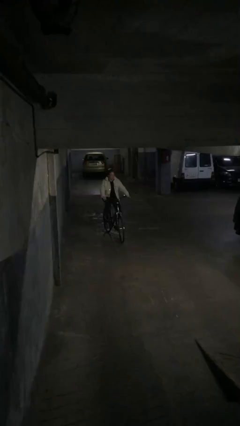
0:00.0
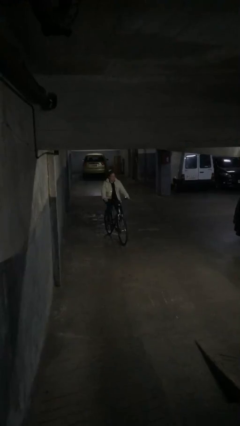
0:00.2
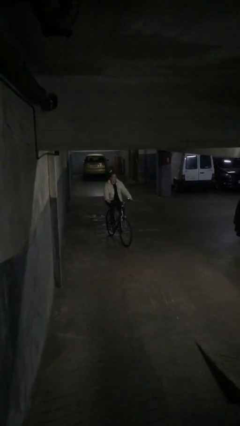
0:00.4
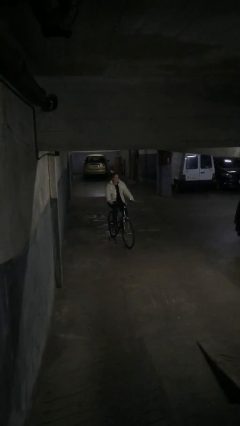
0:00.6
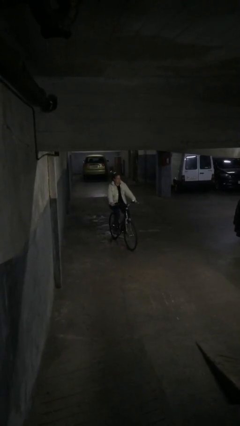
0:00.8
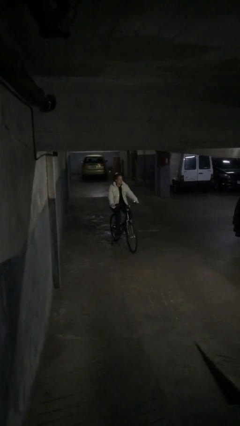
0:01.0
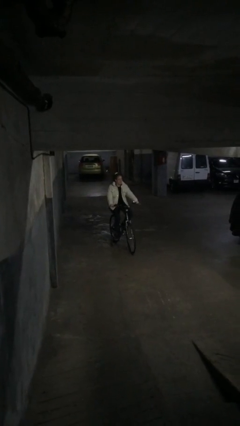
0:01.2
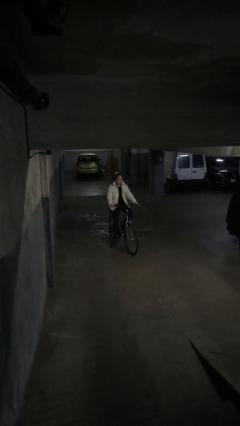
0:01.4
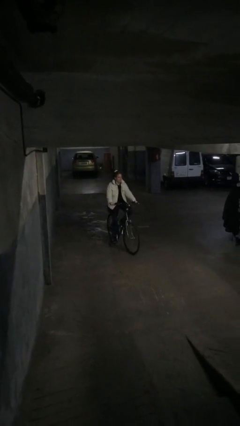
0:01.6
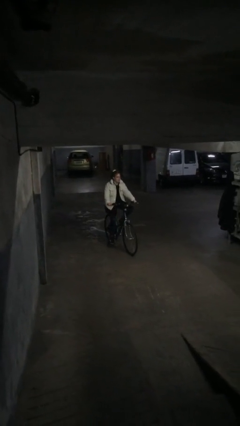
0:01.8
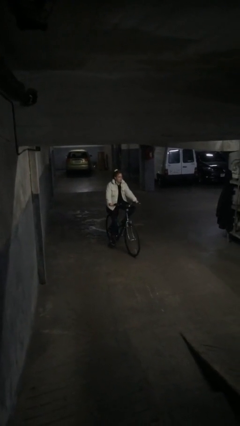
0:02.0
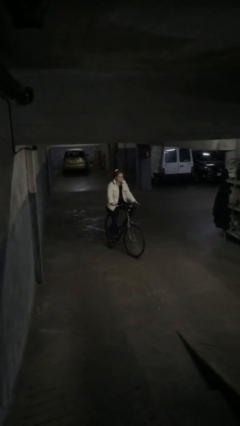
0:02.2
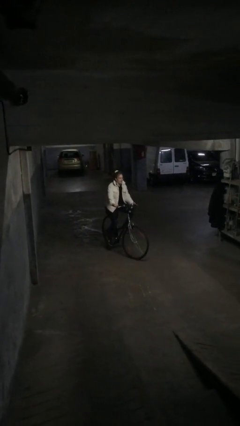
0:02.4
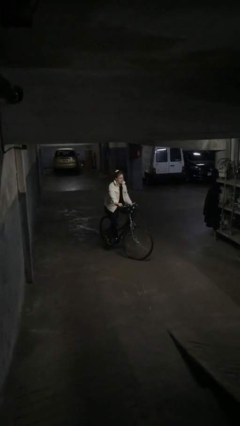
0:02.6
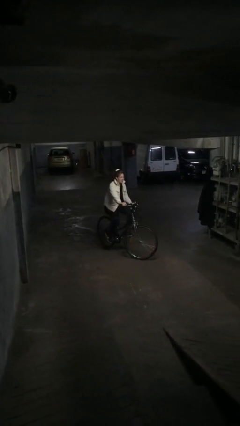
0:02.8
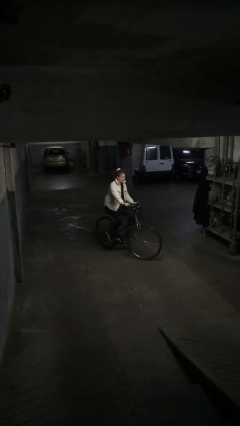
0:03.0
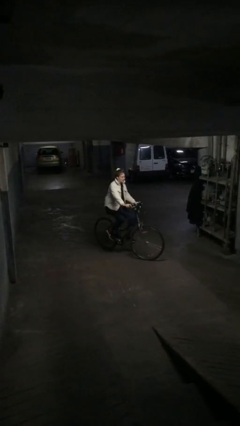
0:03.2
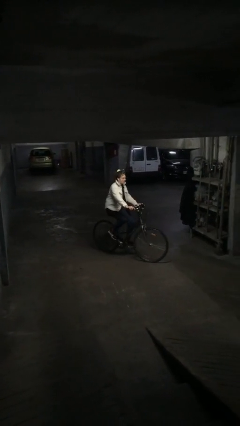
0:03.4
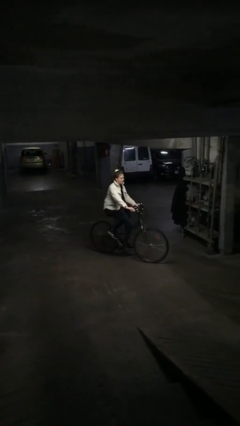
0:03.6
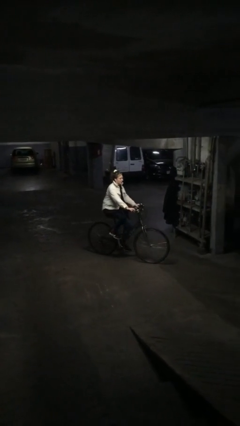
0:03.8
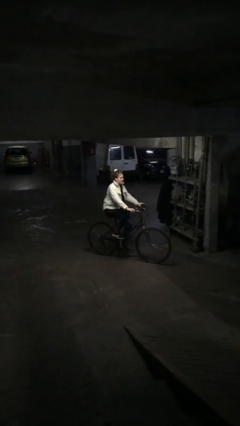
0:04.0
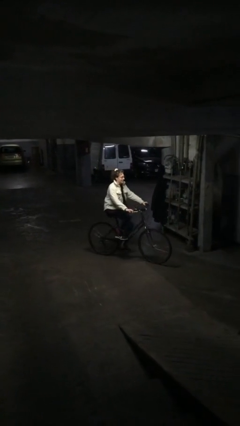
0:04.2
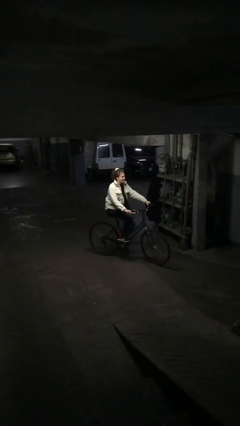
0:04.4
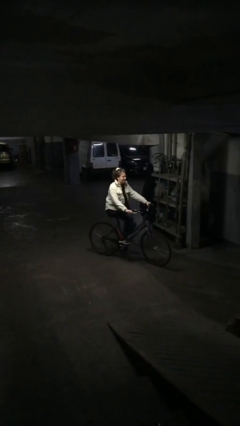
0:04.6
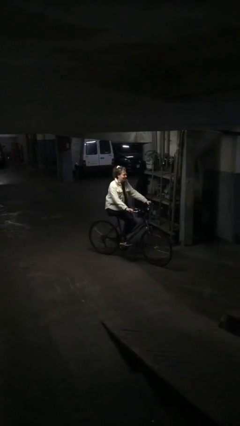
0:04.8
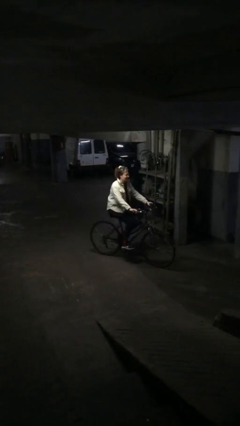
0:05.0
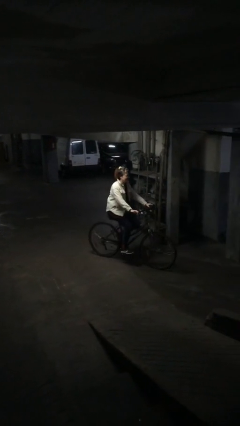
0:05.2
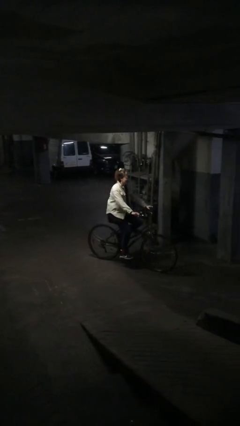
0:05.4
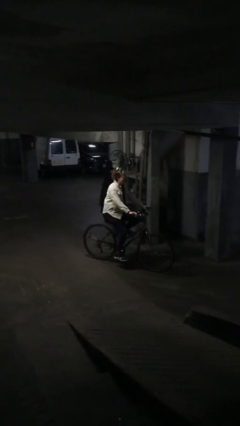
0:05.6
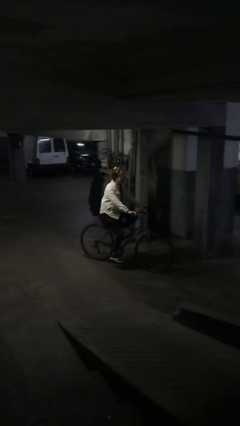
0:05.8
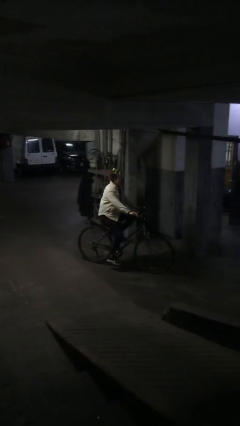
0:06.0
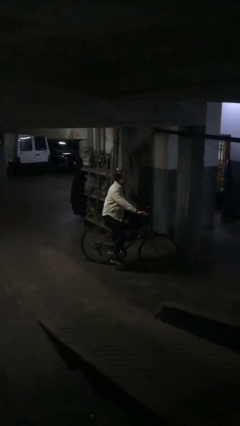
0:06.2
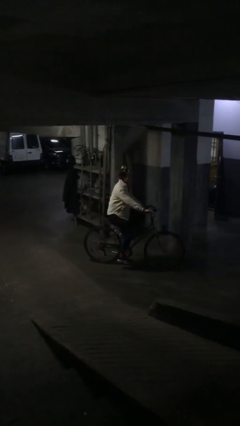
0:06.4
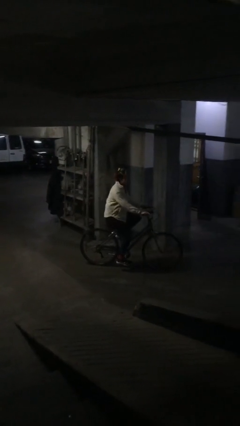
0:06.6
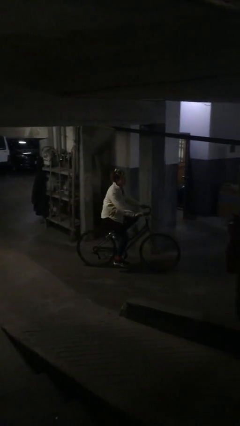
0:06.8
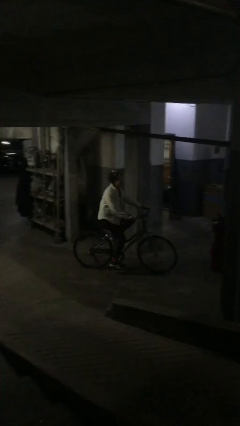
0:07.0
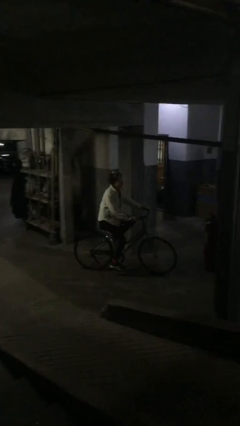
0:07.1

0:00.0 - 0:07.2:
person rides bicycle

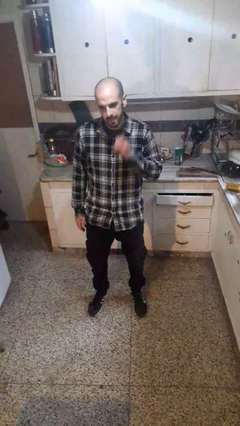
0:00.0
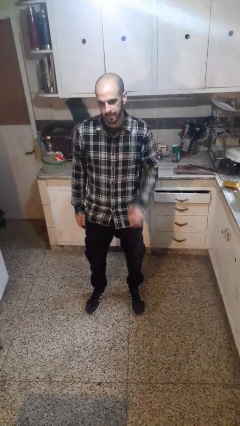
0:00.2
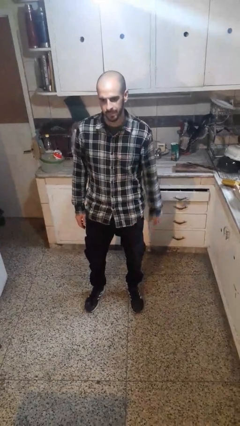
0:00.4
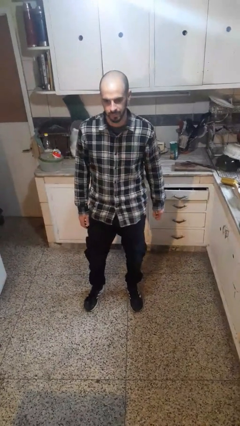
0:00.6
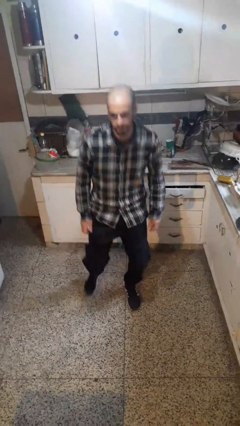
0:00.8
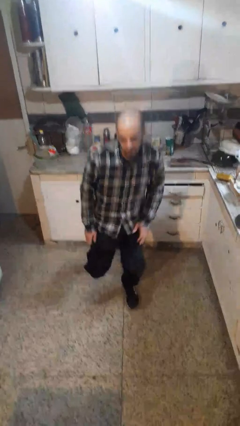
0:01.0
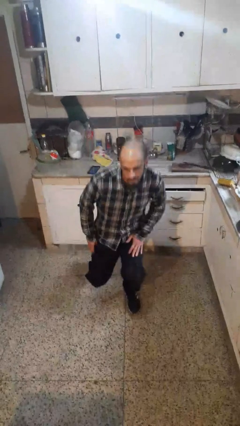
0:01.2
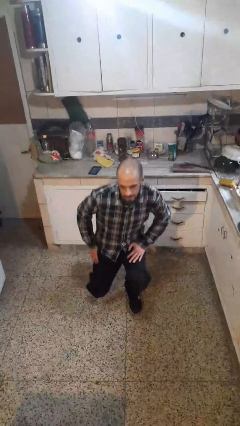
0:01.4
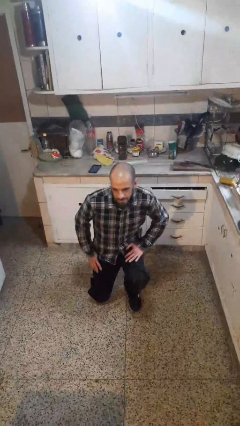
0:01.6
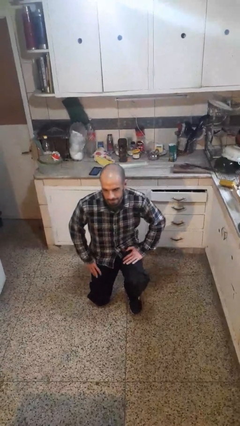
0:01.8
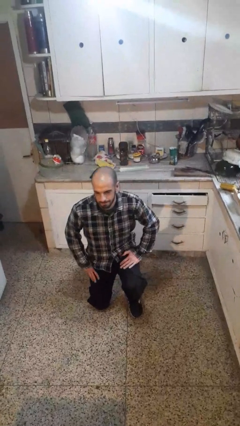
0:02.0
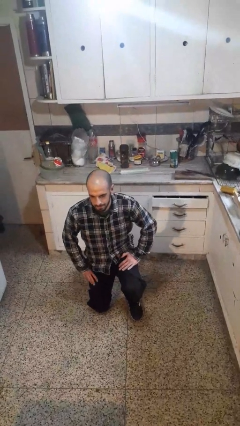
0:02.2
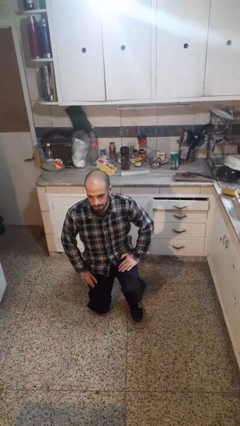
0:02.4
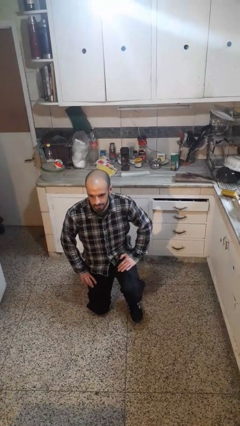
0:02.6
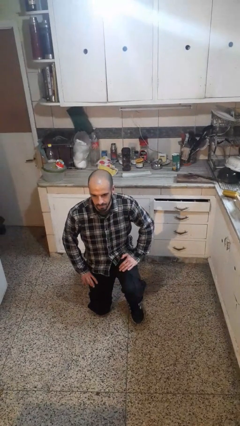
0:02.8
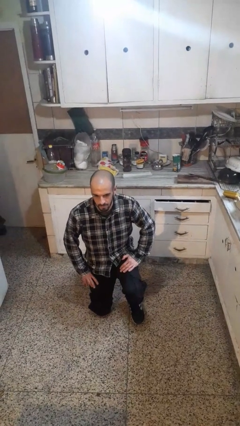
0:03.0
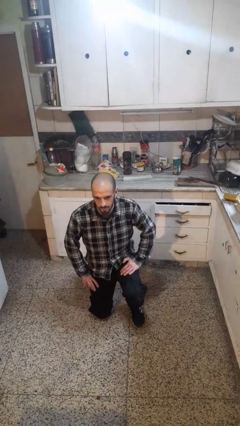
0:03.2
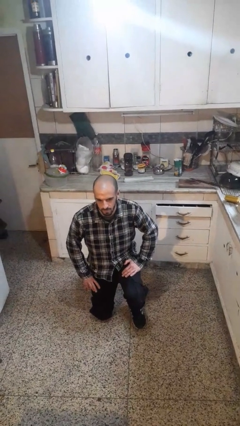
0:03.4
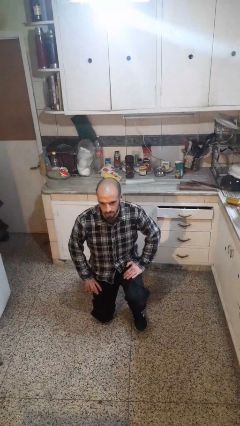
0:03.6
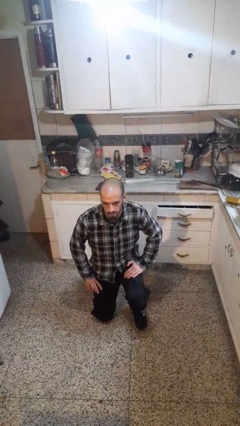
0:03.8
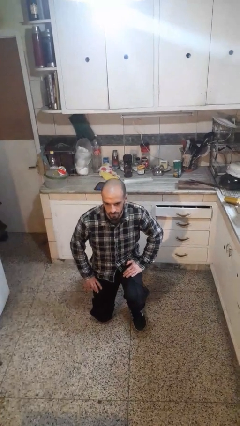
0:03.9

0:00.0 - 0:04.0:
person kneels

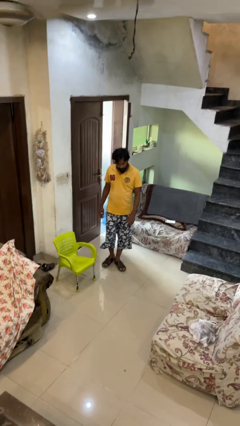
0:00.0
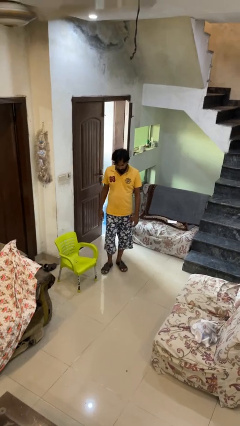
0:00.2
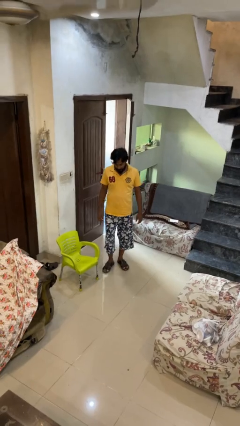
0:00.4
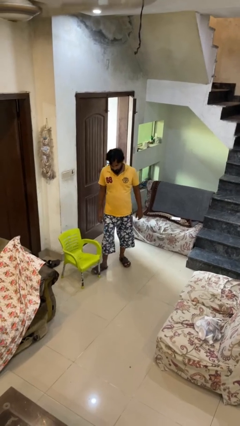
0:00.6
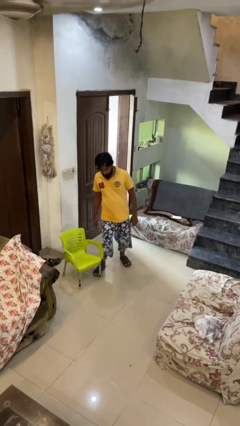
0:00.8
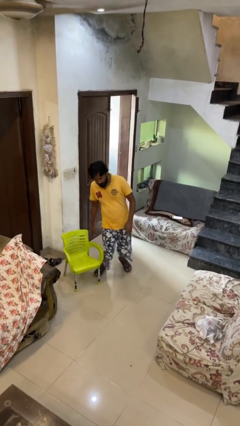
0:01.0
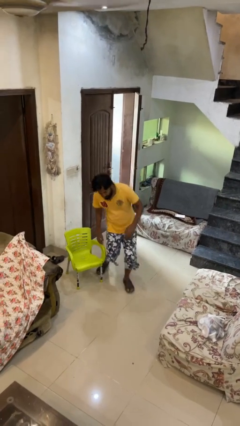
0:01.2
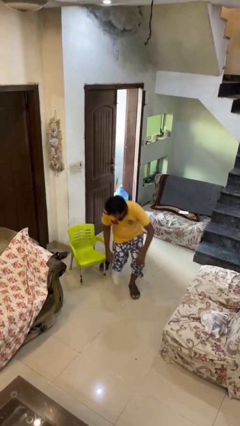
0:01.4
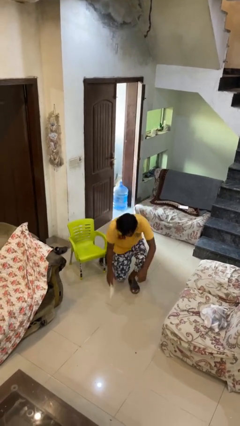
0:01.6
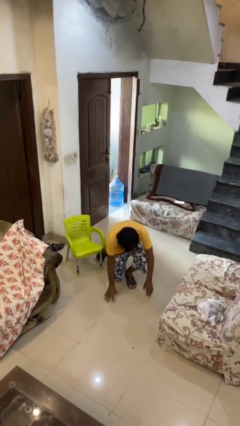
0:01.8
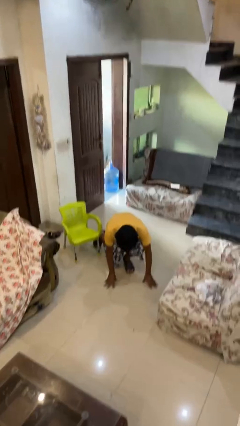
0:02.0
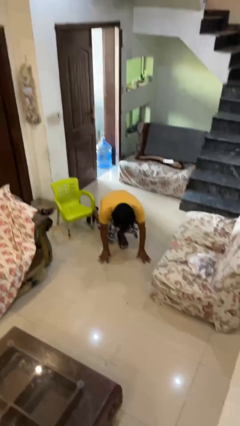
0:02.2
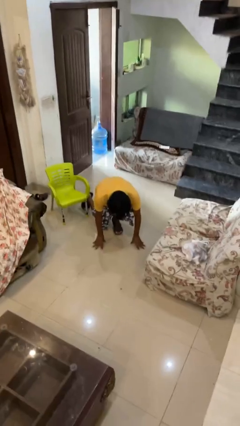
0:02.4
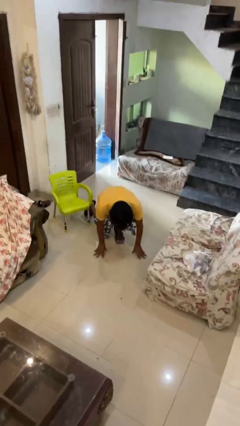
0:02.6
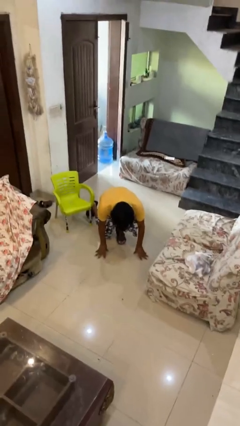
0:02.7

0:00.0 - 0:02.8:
person trips on object on floor

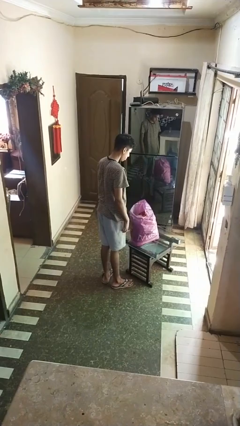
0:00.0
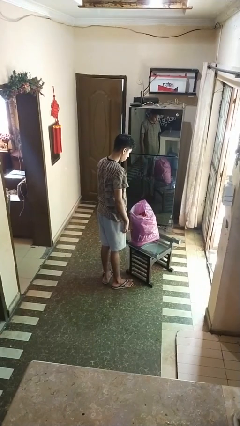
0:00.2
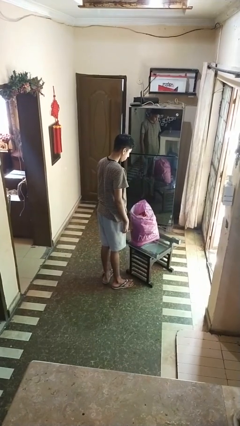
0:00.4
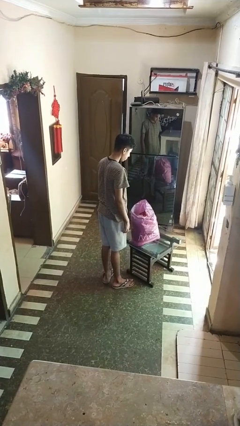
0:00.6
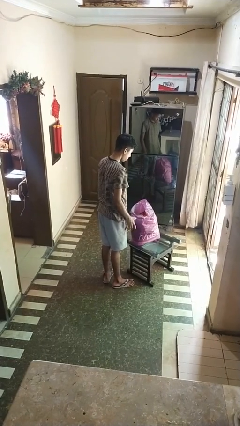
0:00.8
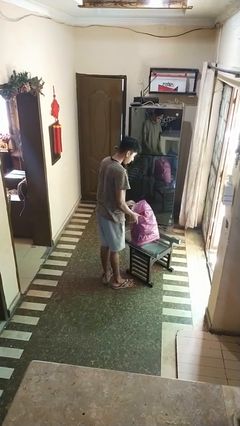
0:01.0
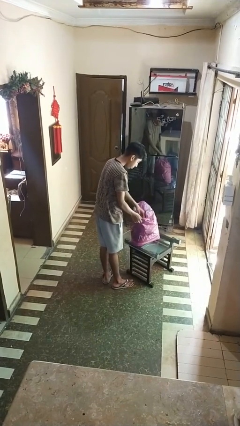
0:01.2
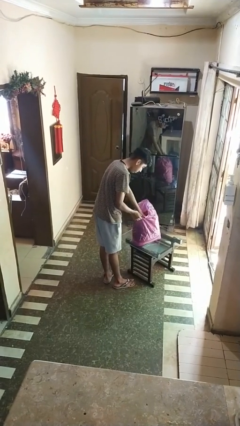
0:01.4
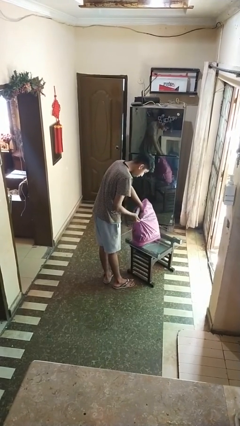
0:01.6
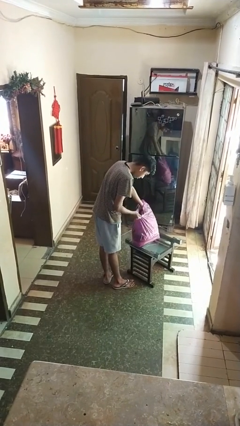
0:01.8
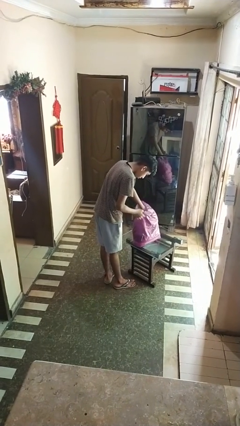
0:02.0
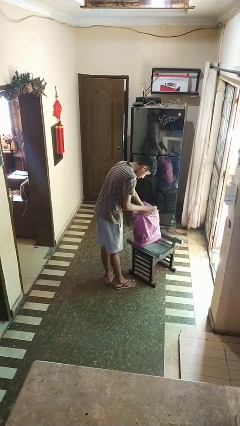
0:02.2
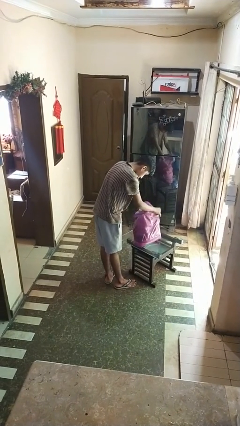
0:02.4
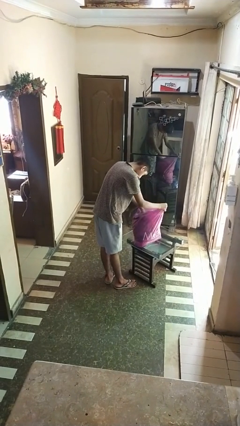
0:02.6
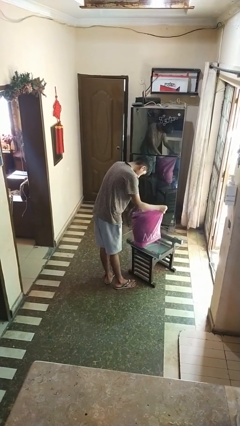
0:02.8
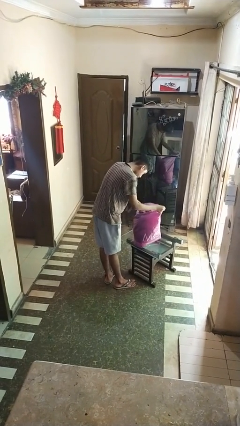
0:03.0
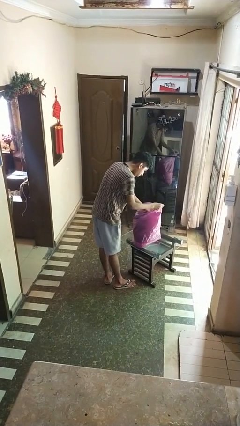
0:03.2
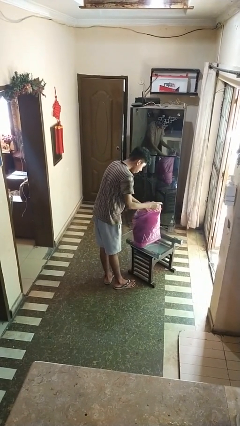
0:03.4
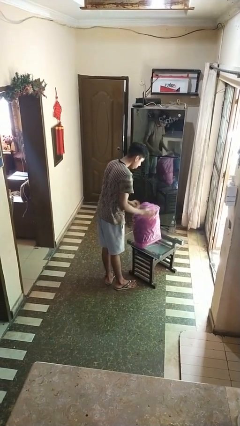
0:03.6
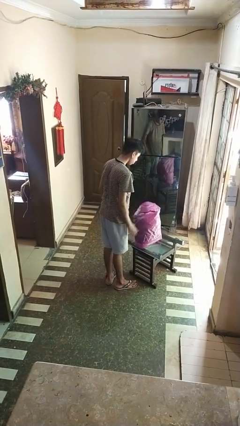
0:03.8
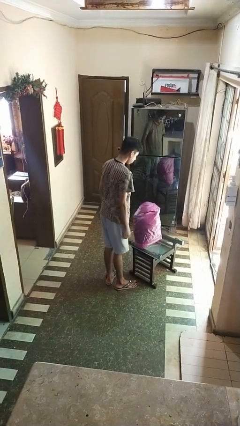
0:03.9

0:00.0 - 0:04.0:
person searches in bag
